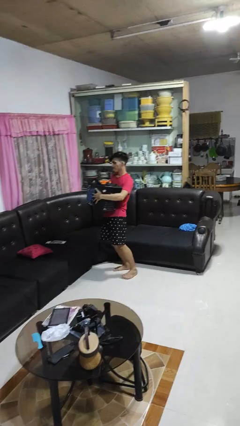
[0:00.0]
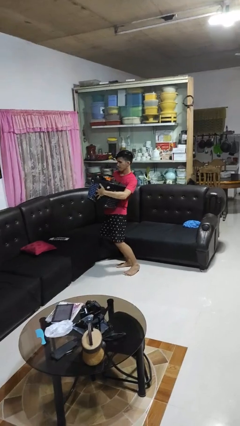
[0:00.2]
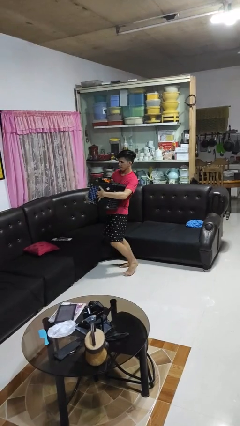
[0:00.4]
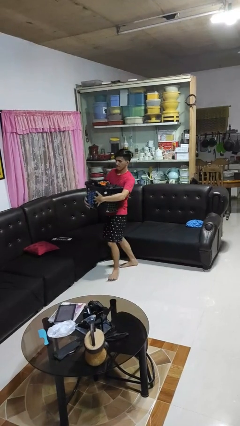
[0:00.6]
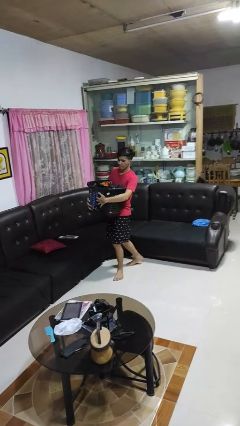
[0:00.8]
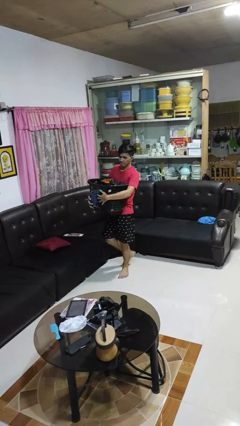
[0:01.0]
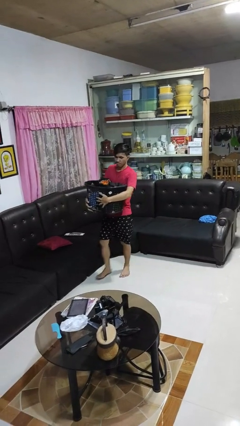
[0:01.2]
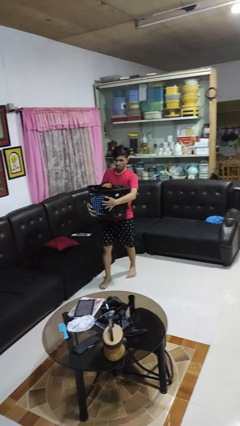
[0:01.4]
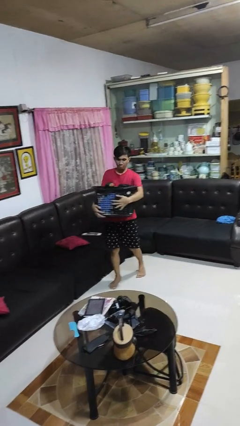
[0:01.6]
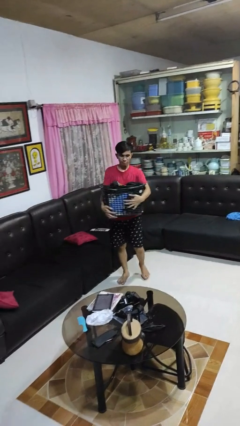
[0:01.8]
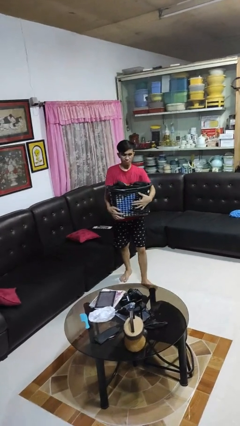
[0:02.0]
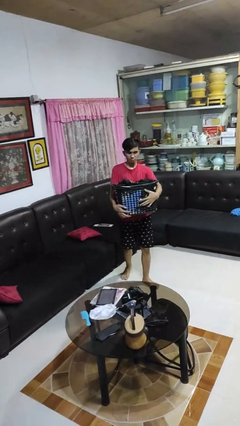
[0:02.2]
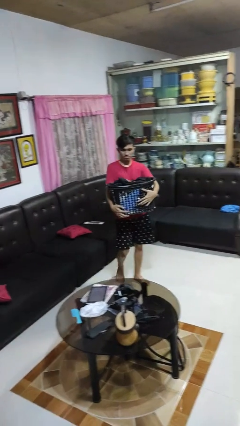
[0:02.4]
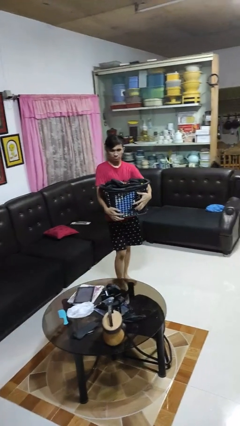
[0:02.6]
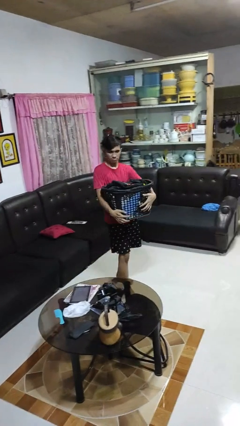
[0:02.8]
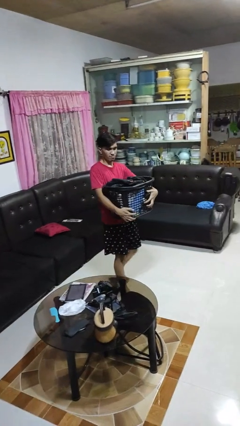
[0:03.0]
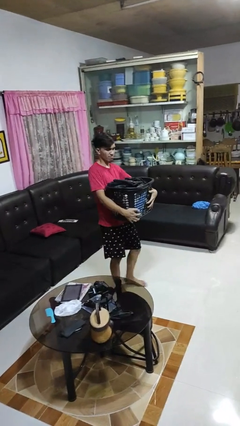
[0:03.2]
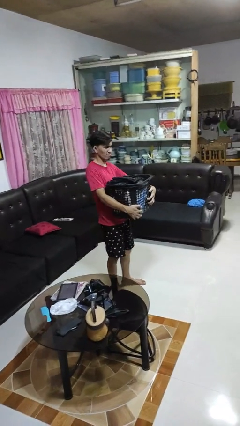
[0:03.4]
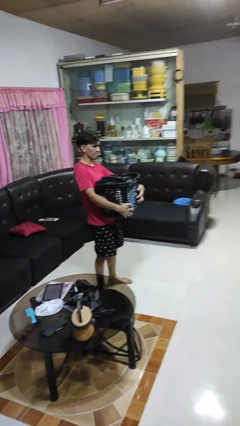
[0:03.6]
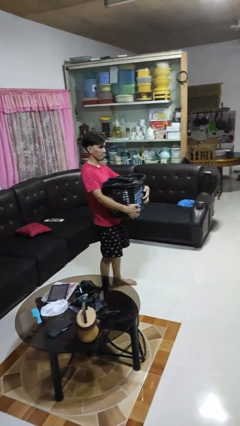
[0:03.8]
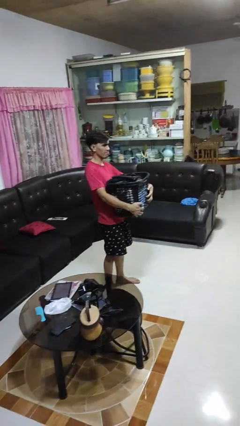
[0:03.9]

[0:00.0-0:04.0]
person carries laundry basket

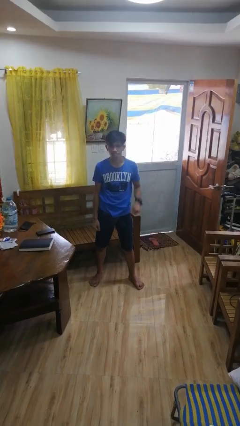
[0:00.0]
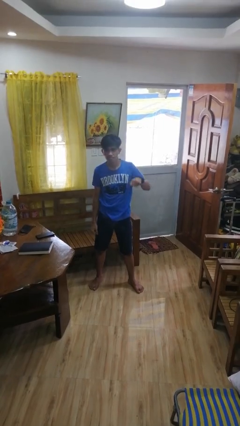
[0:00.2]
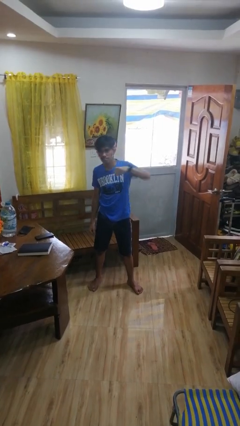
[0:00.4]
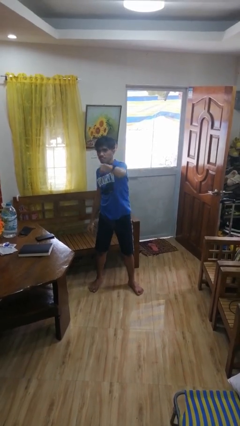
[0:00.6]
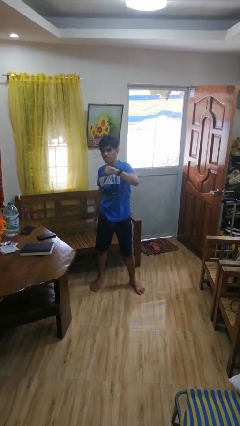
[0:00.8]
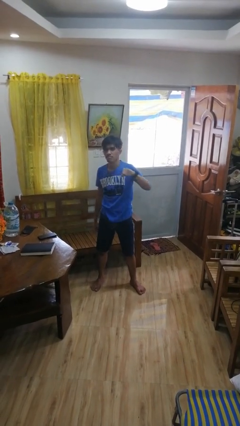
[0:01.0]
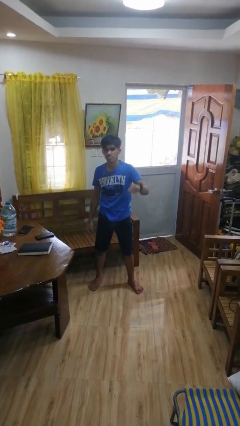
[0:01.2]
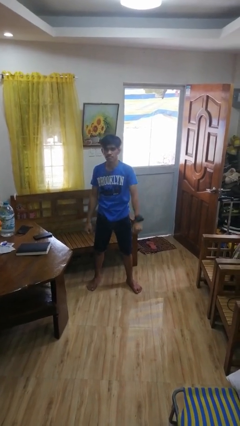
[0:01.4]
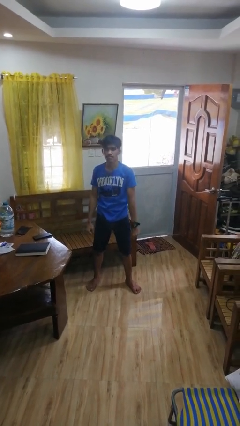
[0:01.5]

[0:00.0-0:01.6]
person punches

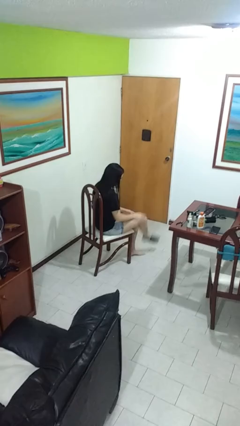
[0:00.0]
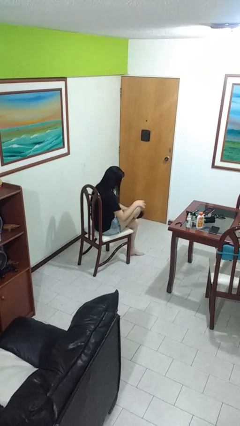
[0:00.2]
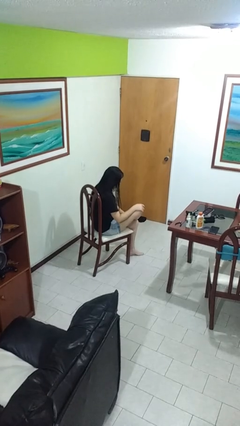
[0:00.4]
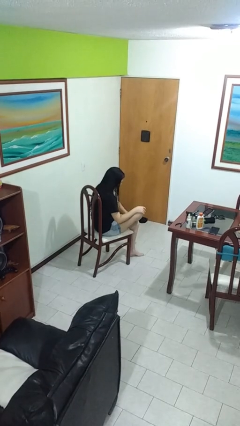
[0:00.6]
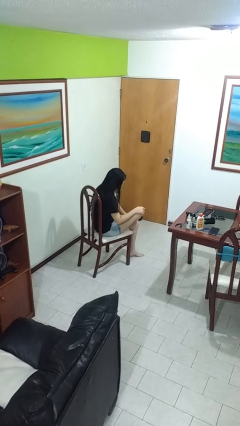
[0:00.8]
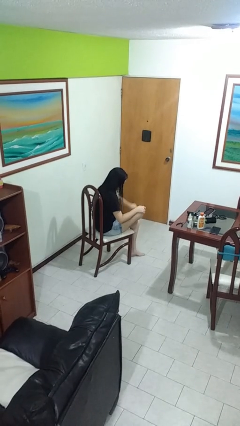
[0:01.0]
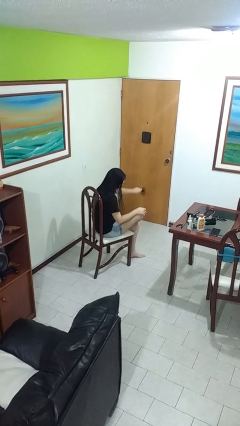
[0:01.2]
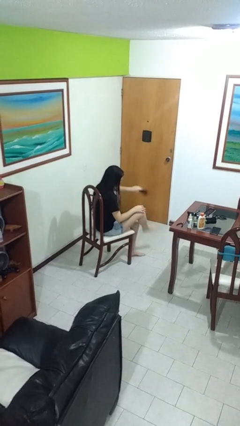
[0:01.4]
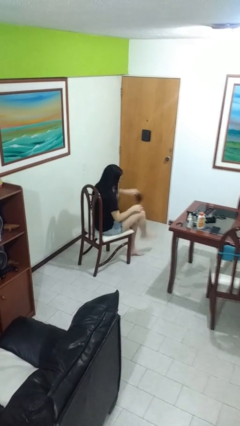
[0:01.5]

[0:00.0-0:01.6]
person takes off socks

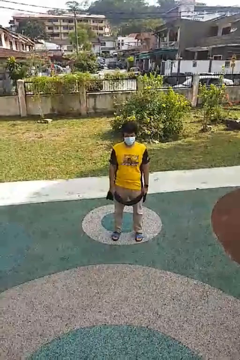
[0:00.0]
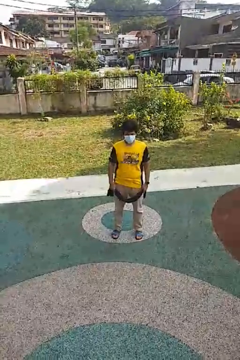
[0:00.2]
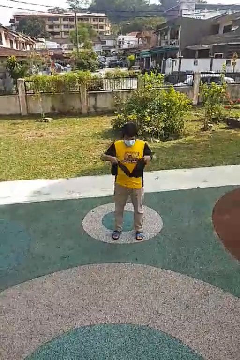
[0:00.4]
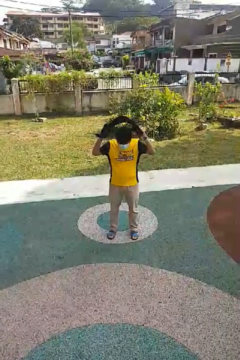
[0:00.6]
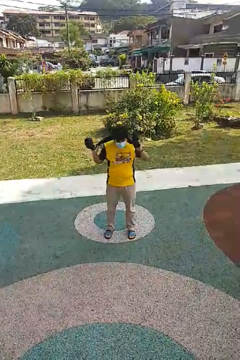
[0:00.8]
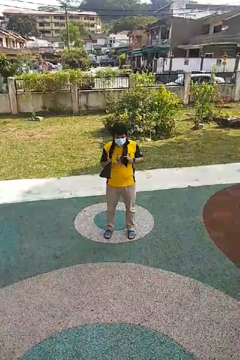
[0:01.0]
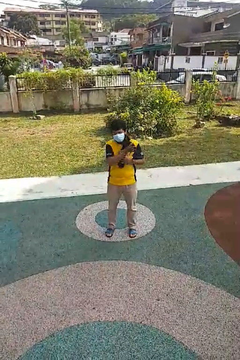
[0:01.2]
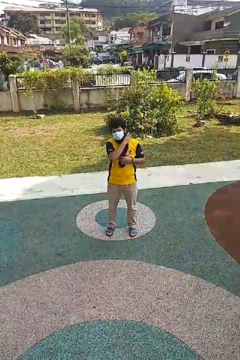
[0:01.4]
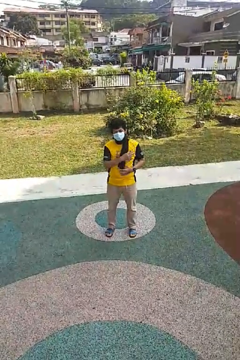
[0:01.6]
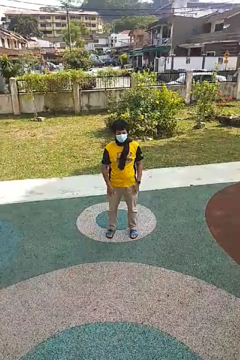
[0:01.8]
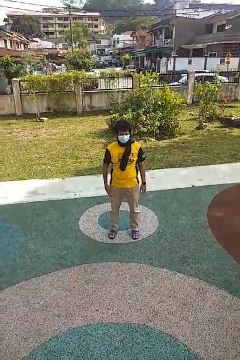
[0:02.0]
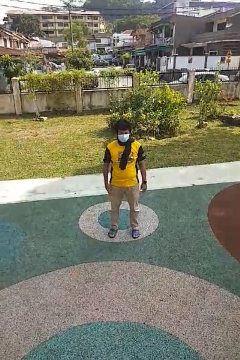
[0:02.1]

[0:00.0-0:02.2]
person puts on scarf

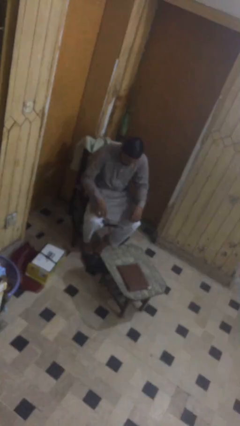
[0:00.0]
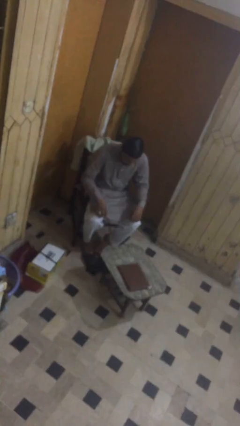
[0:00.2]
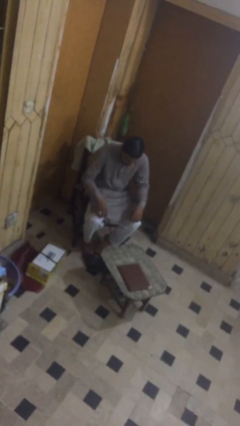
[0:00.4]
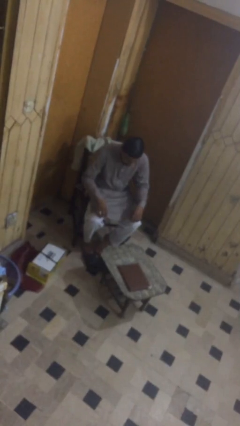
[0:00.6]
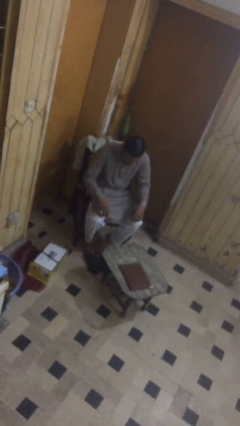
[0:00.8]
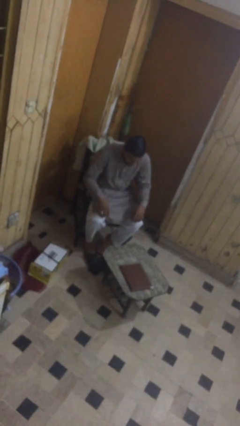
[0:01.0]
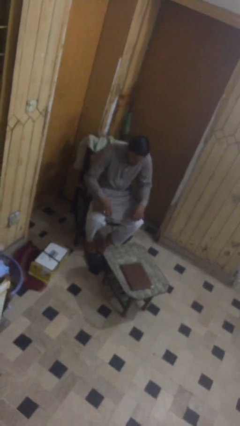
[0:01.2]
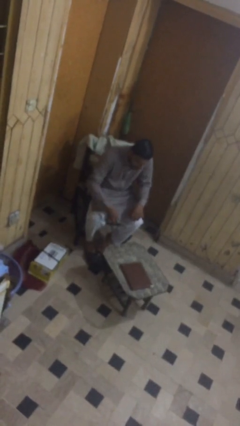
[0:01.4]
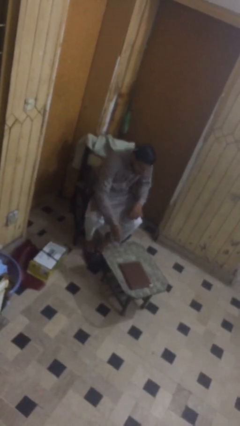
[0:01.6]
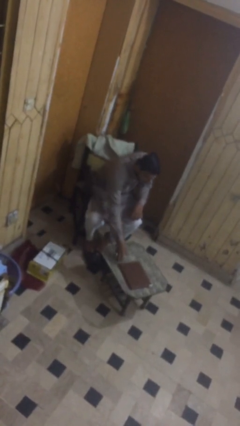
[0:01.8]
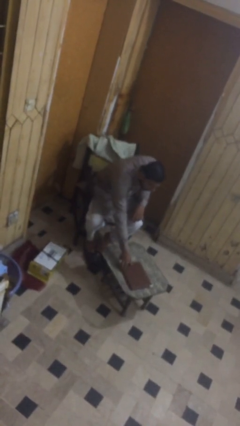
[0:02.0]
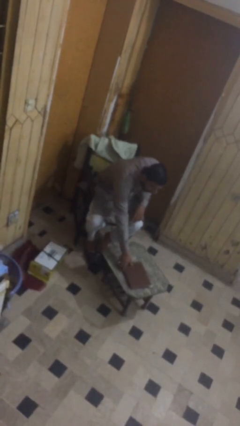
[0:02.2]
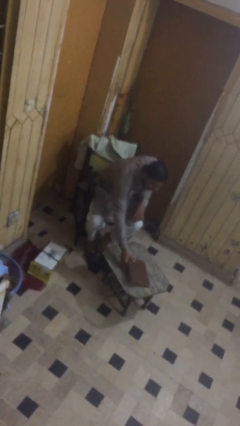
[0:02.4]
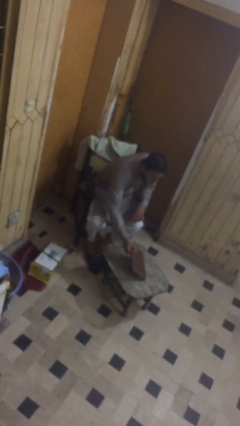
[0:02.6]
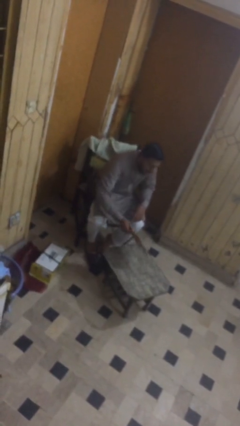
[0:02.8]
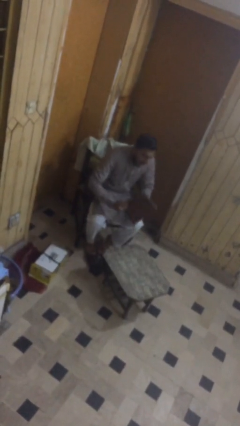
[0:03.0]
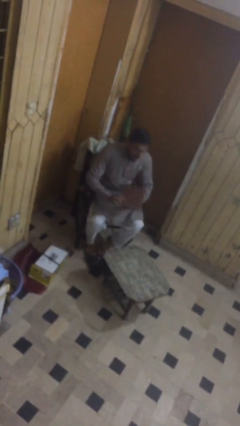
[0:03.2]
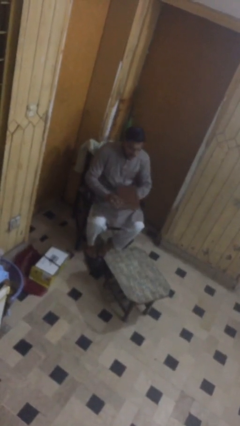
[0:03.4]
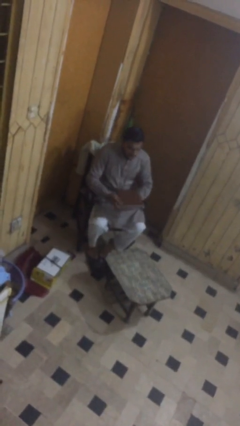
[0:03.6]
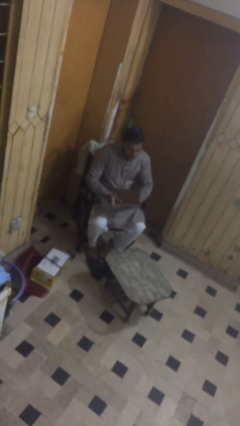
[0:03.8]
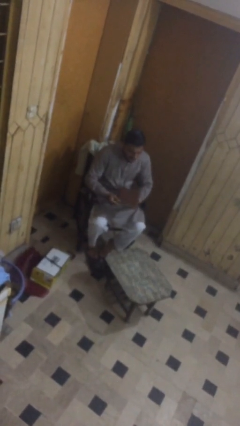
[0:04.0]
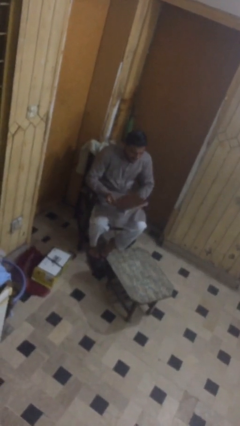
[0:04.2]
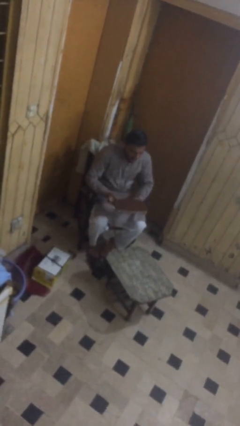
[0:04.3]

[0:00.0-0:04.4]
person picks up object from table

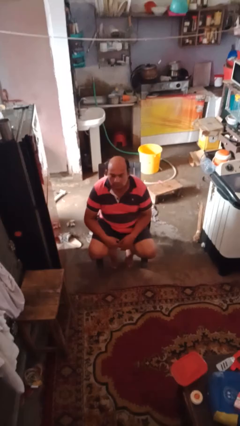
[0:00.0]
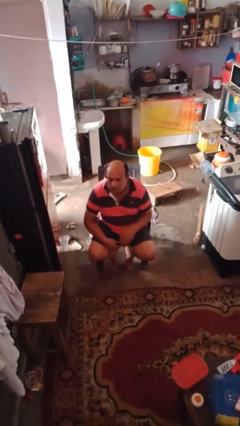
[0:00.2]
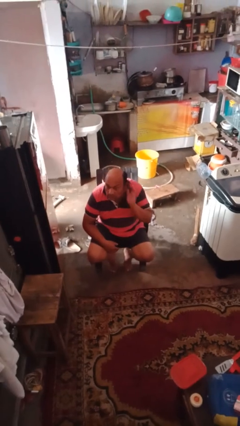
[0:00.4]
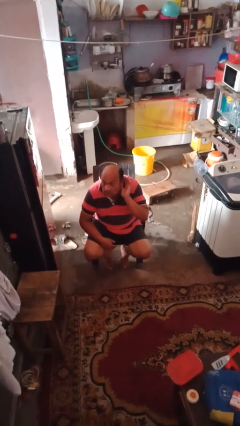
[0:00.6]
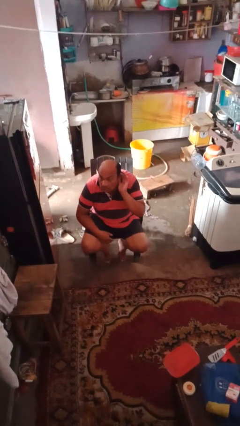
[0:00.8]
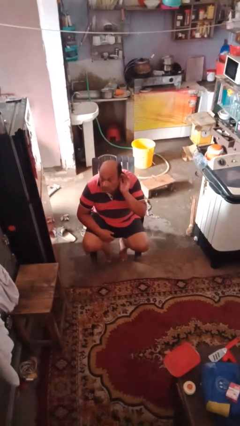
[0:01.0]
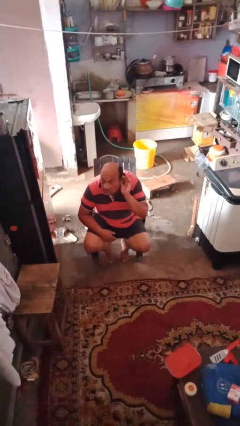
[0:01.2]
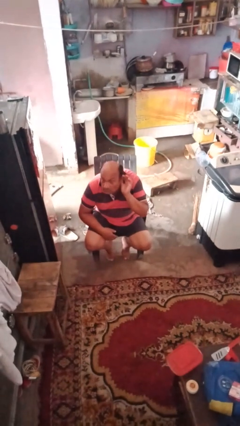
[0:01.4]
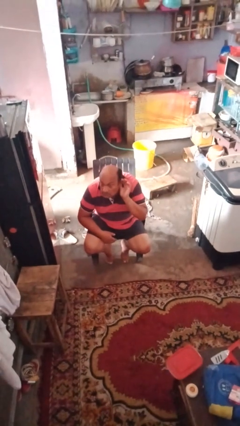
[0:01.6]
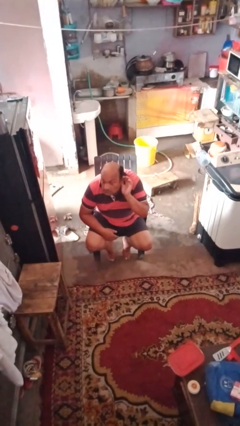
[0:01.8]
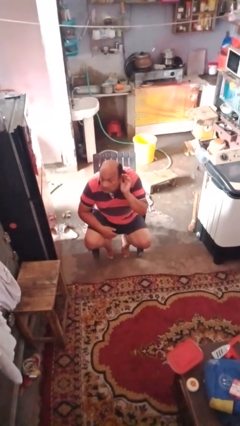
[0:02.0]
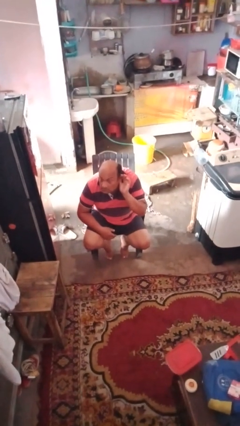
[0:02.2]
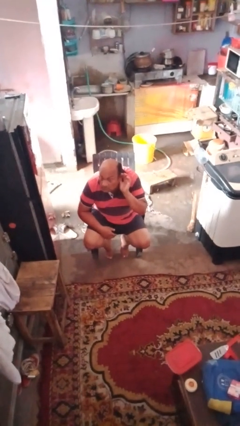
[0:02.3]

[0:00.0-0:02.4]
person gestures listen closely

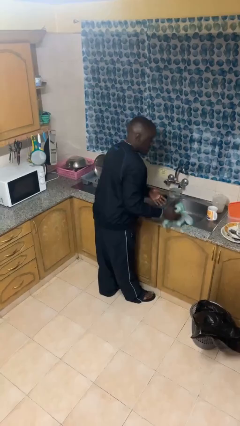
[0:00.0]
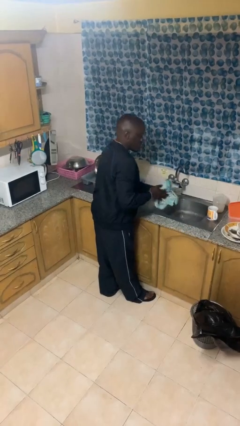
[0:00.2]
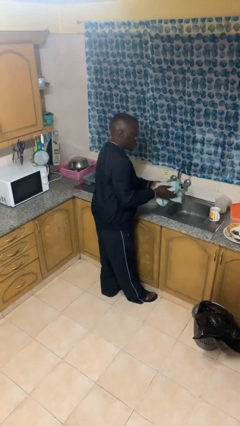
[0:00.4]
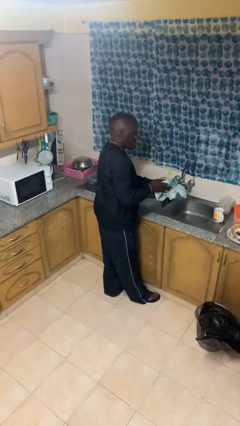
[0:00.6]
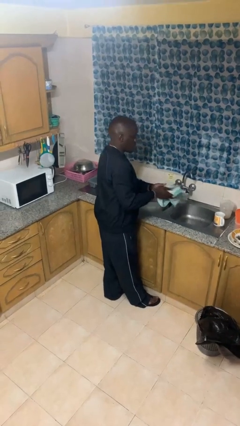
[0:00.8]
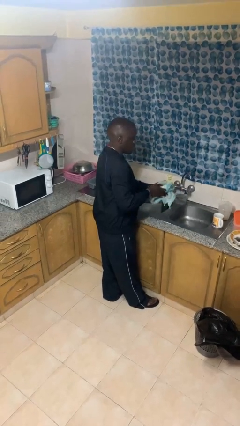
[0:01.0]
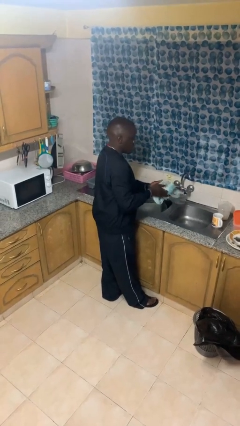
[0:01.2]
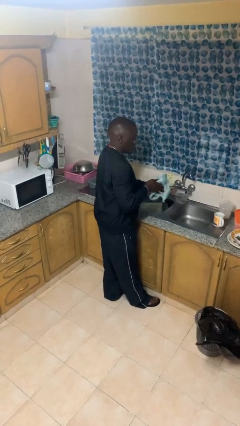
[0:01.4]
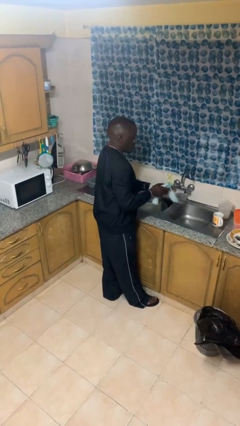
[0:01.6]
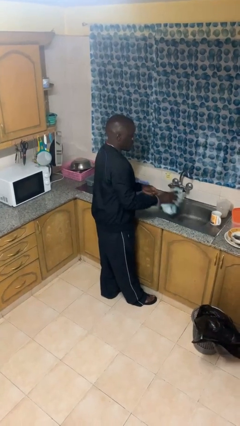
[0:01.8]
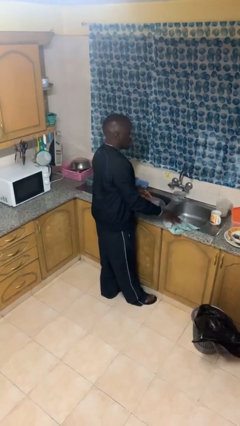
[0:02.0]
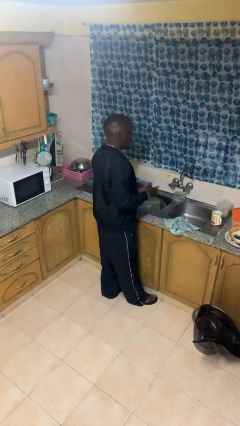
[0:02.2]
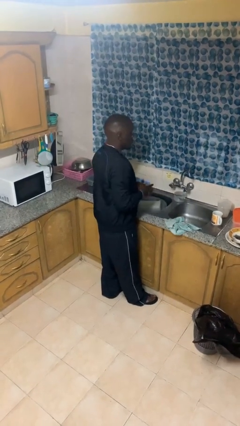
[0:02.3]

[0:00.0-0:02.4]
person dries hands with towel
